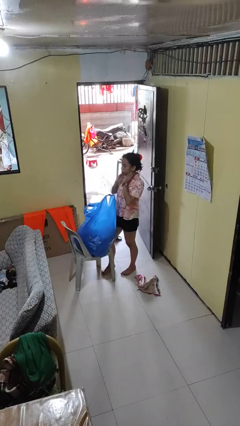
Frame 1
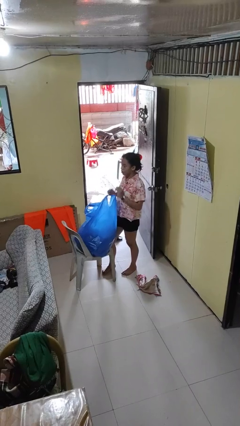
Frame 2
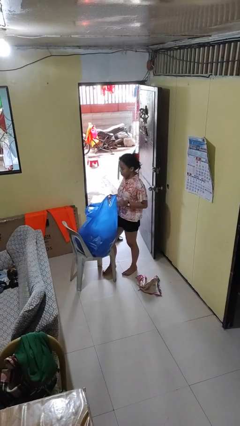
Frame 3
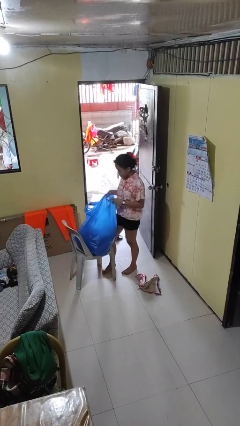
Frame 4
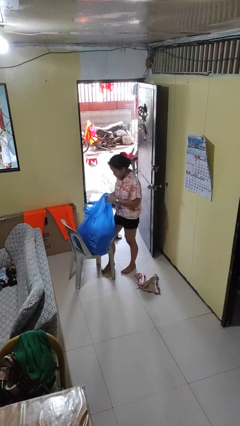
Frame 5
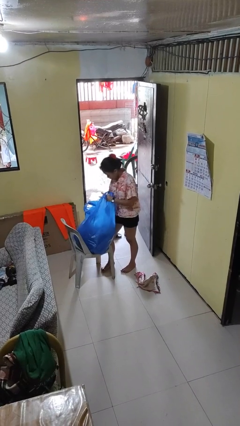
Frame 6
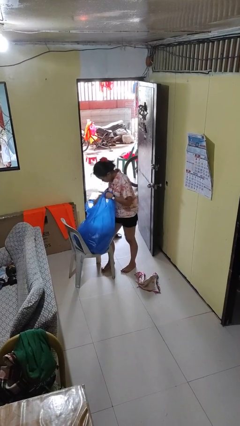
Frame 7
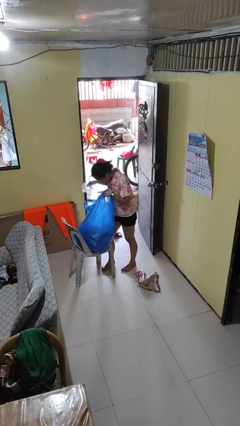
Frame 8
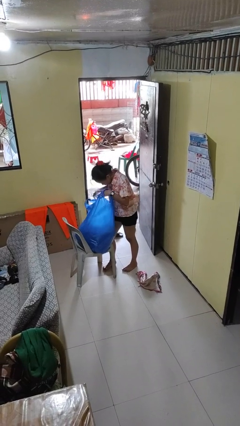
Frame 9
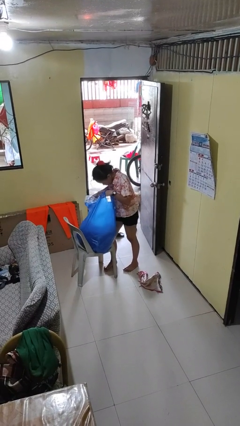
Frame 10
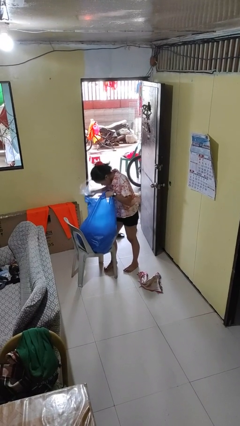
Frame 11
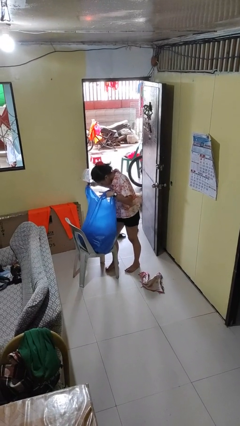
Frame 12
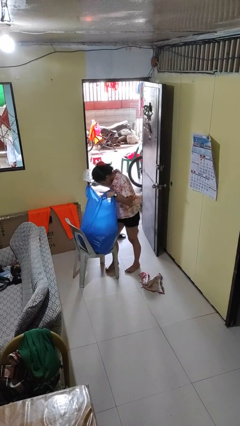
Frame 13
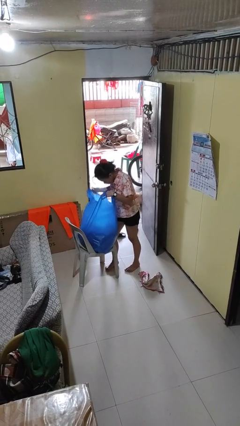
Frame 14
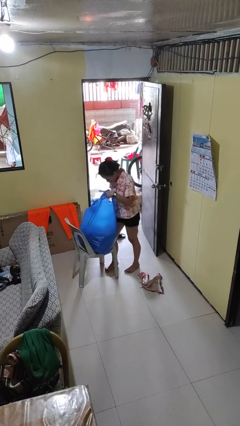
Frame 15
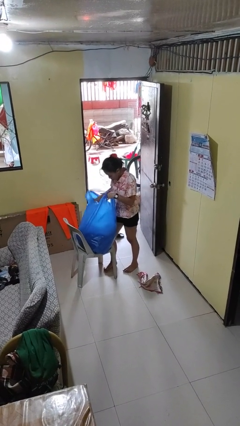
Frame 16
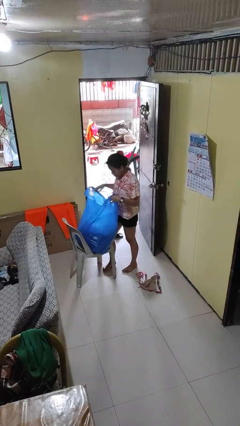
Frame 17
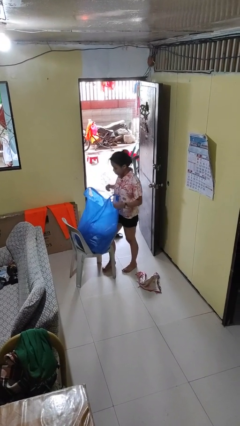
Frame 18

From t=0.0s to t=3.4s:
person searches in bag

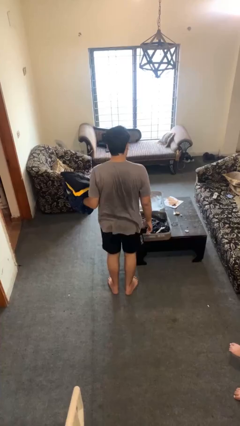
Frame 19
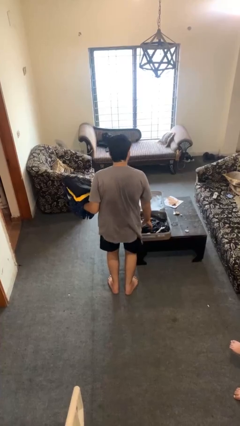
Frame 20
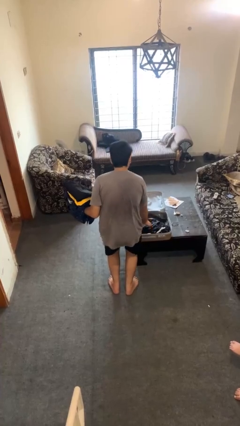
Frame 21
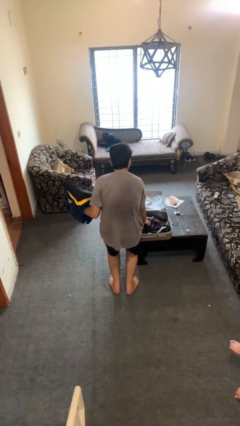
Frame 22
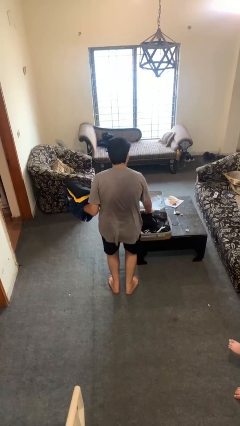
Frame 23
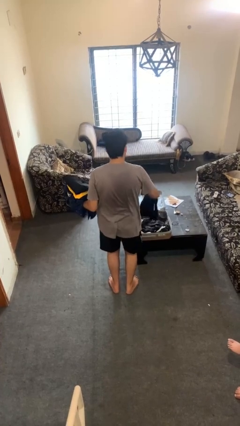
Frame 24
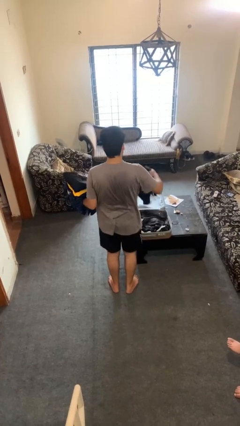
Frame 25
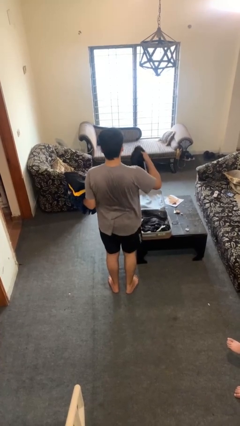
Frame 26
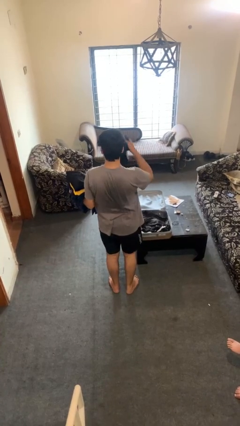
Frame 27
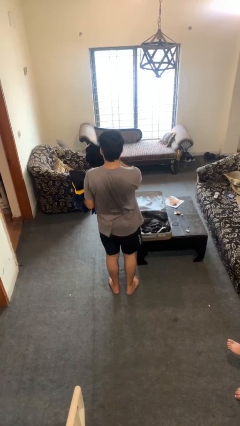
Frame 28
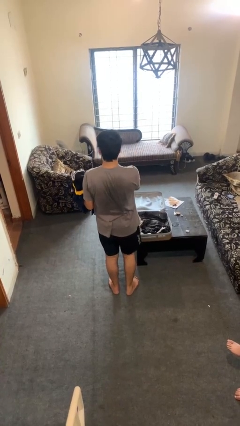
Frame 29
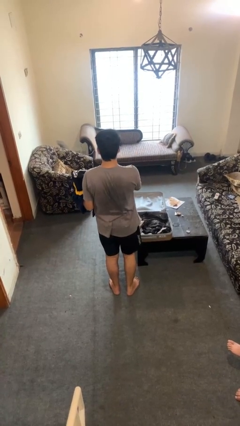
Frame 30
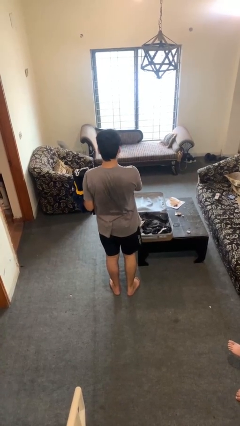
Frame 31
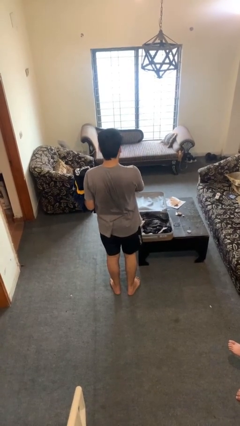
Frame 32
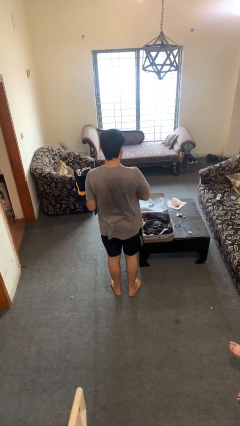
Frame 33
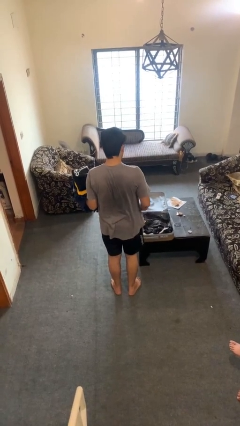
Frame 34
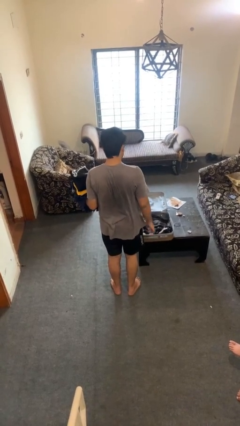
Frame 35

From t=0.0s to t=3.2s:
person unloads clothes from suitcase

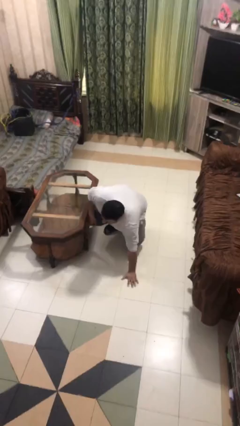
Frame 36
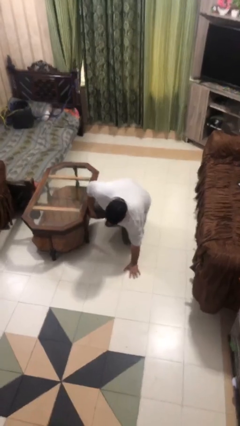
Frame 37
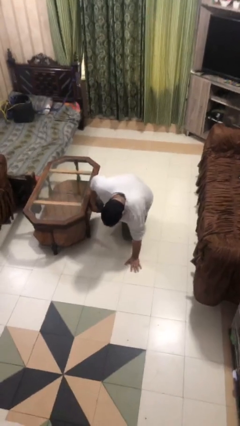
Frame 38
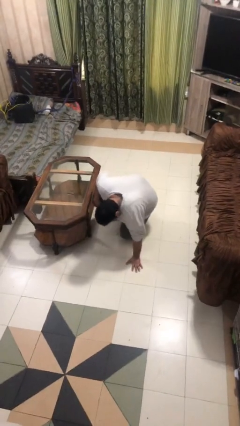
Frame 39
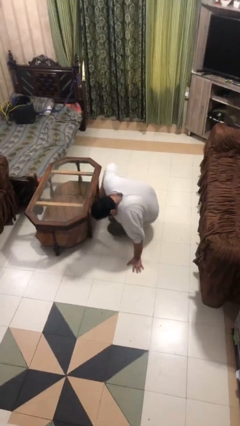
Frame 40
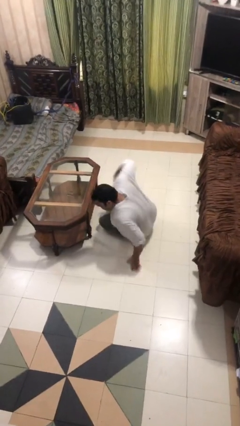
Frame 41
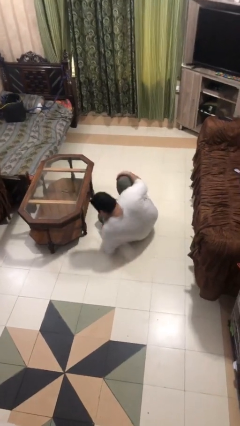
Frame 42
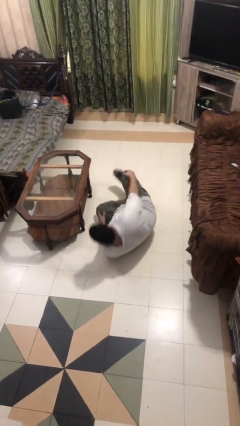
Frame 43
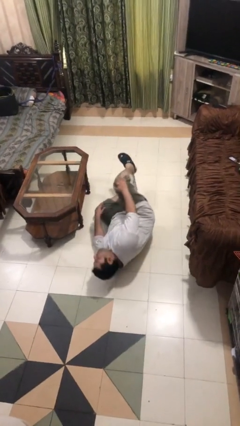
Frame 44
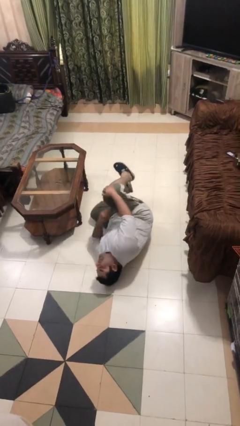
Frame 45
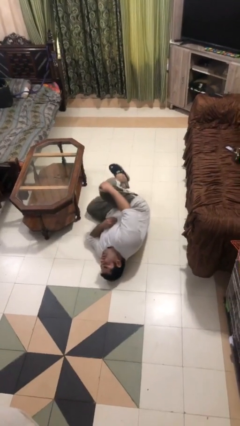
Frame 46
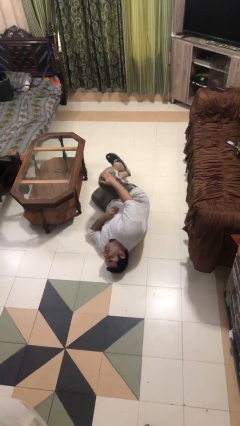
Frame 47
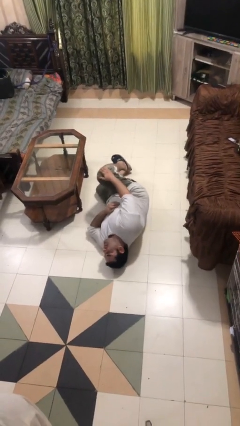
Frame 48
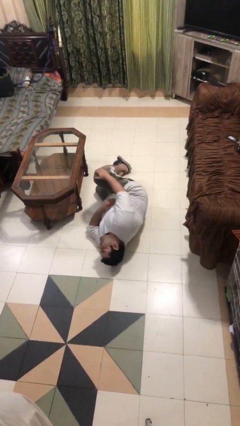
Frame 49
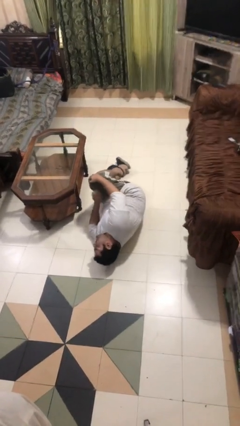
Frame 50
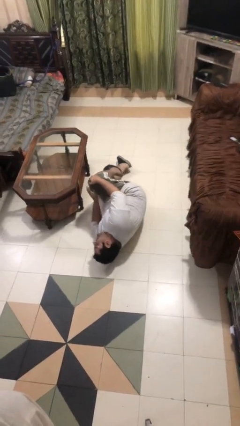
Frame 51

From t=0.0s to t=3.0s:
person lies down on floor

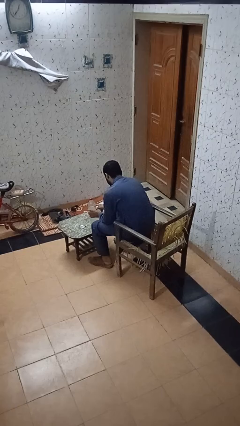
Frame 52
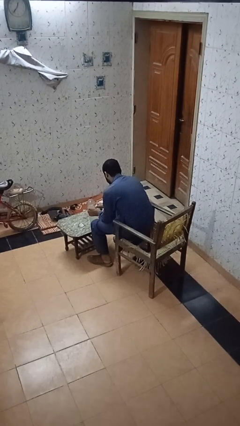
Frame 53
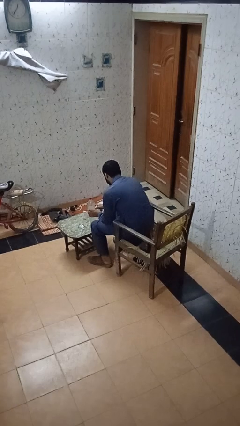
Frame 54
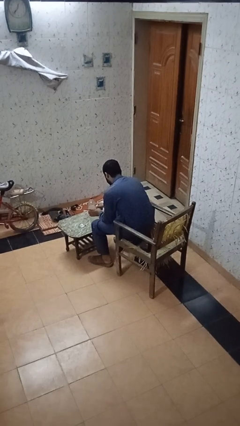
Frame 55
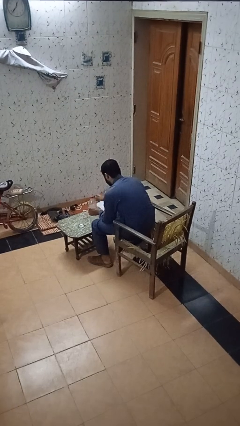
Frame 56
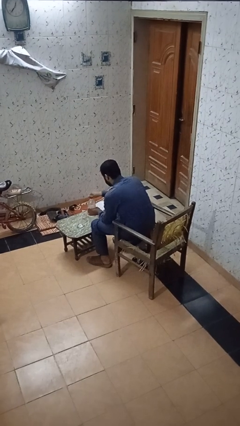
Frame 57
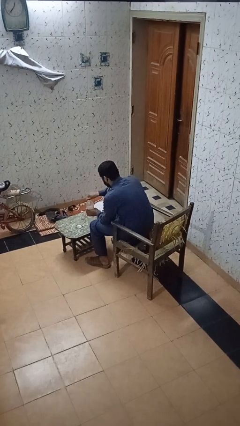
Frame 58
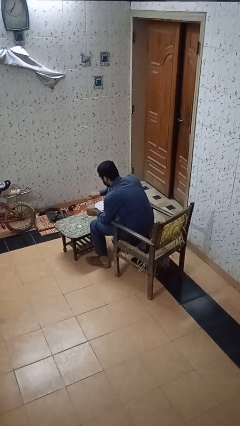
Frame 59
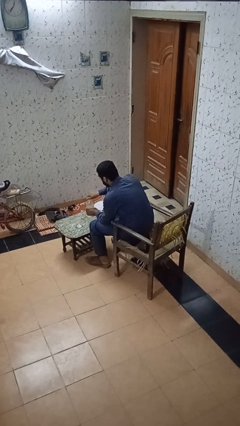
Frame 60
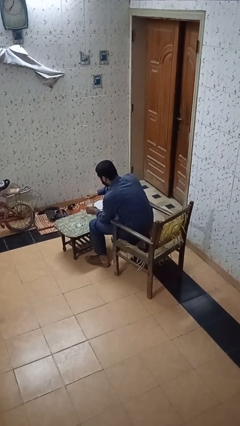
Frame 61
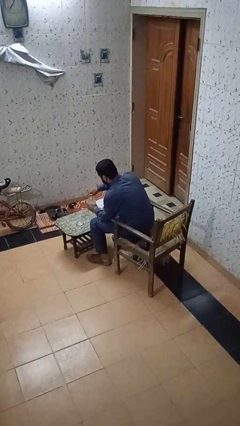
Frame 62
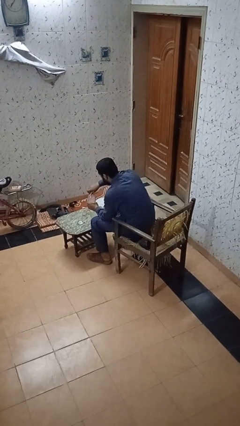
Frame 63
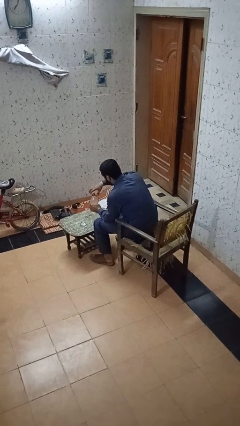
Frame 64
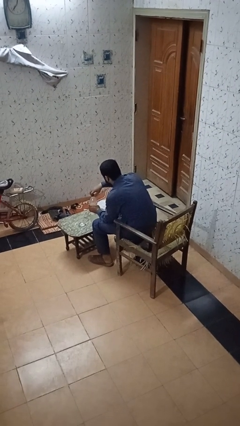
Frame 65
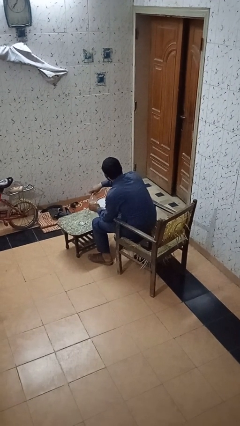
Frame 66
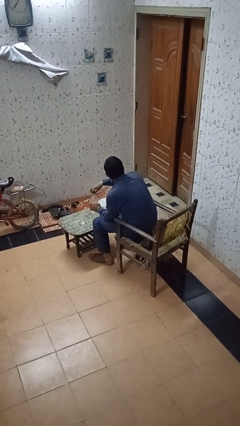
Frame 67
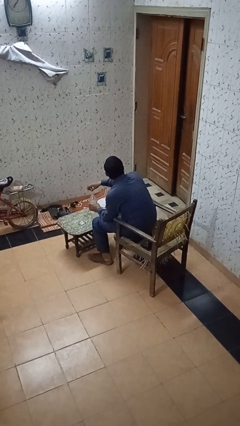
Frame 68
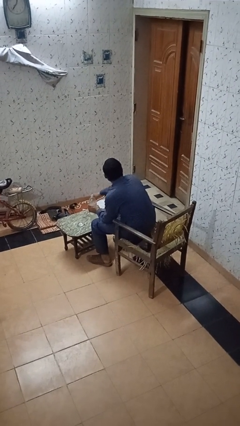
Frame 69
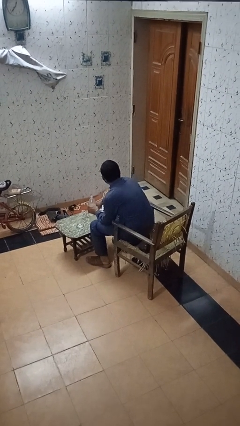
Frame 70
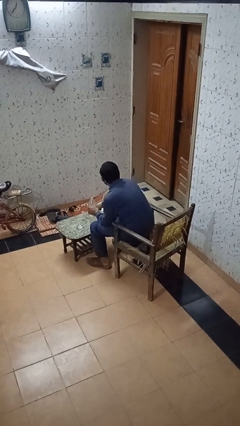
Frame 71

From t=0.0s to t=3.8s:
person unscrews lid from bottle

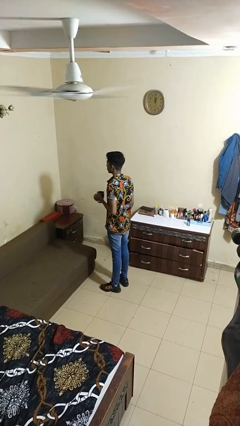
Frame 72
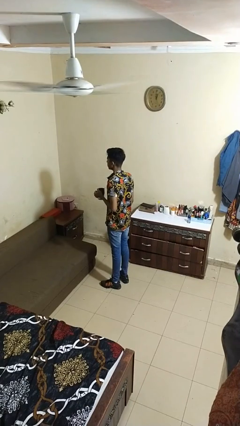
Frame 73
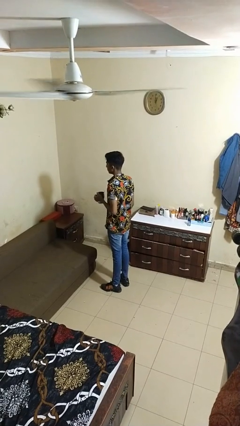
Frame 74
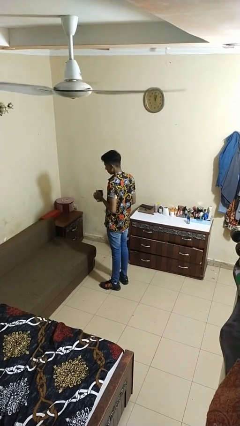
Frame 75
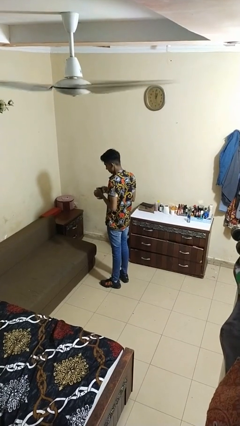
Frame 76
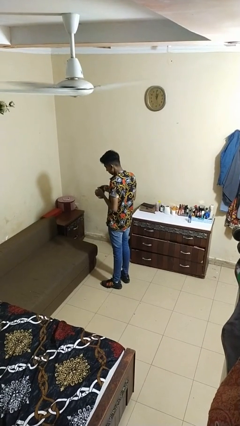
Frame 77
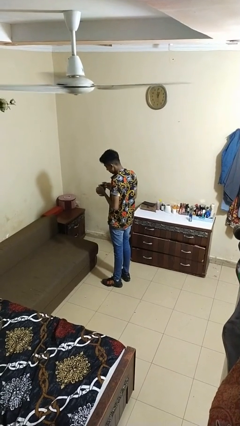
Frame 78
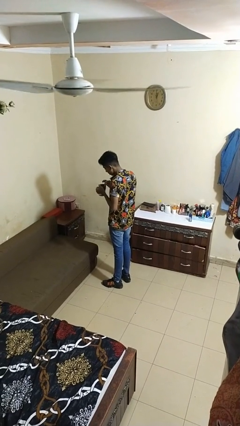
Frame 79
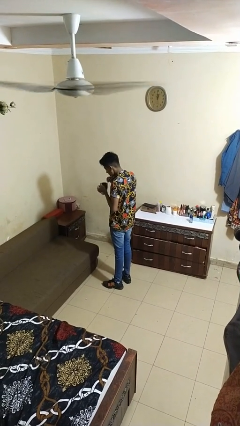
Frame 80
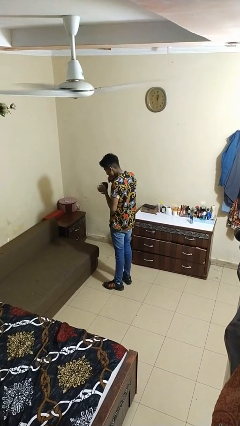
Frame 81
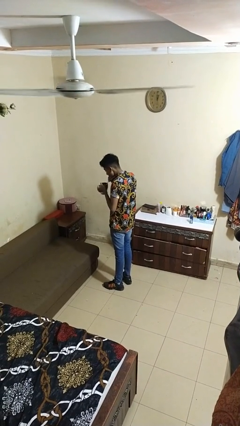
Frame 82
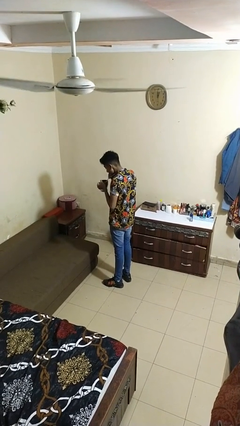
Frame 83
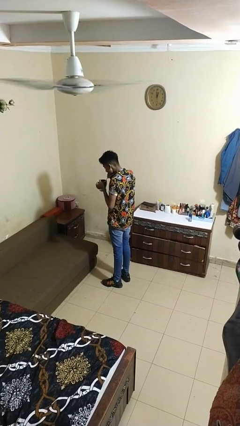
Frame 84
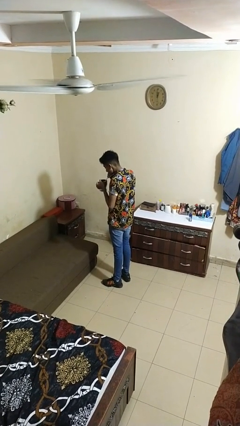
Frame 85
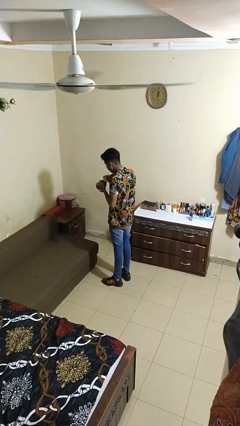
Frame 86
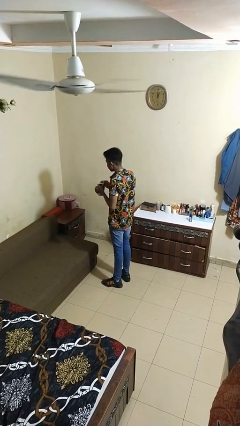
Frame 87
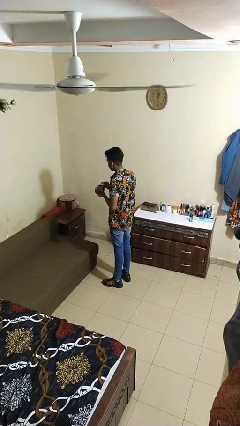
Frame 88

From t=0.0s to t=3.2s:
person drinks from straw

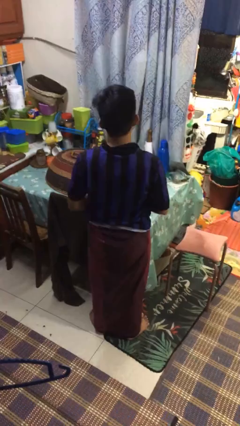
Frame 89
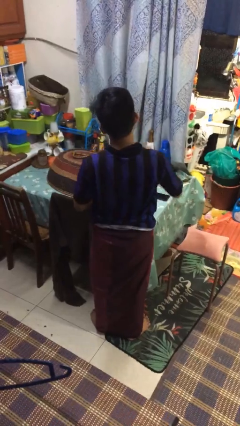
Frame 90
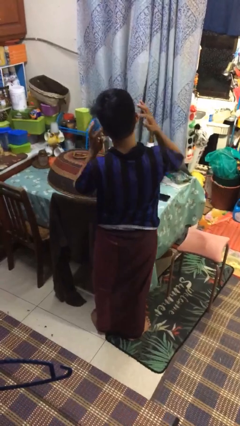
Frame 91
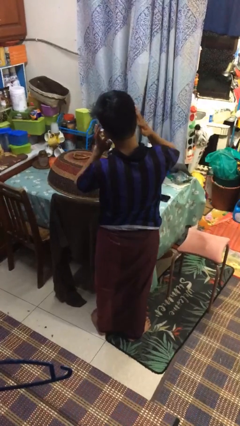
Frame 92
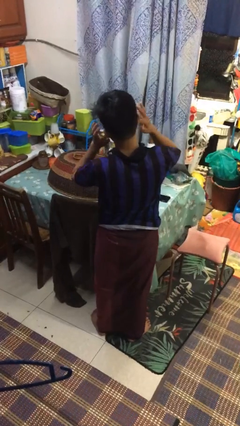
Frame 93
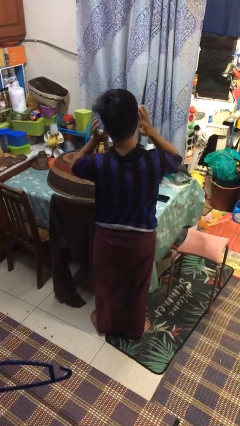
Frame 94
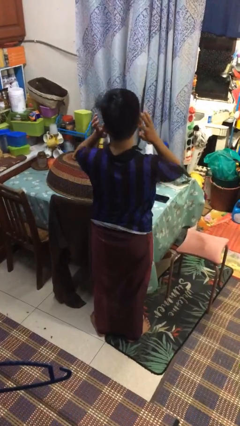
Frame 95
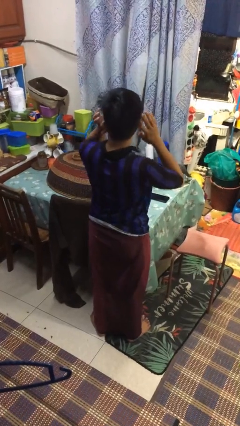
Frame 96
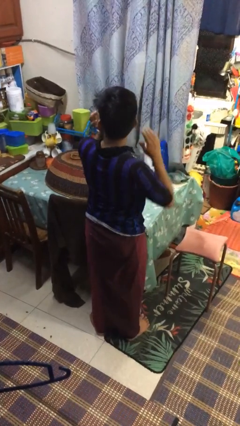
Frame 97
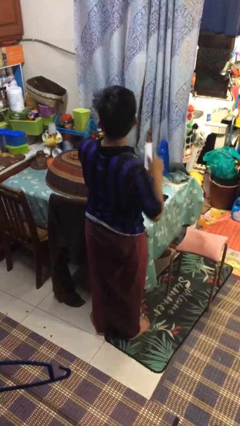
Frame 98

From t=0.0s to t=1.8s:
person puts fingers in ear
